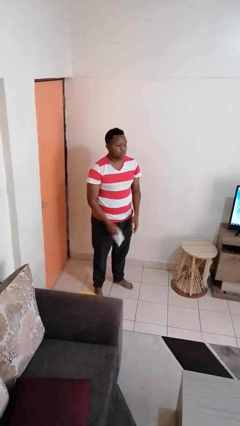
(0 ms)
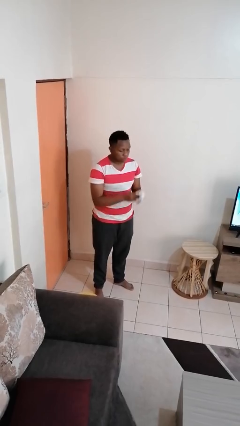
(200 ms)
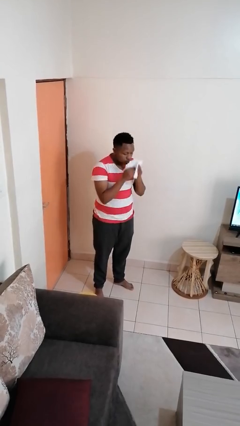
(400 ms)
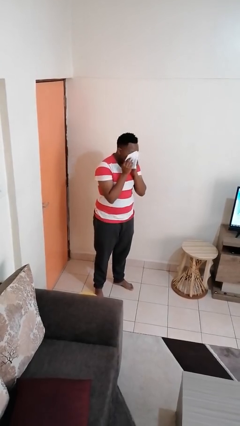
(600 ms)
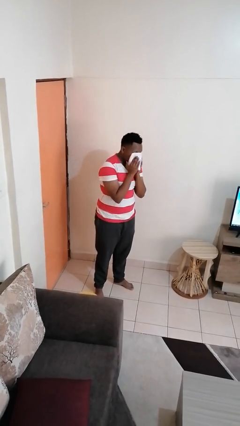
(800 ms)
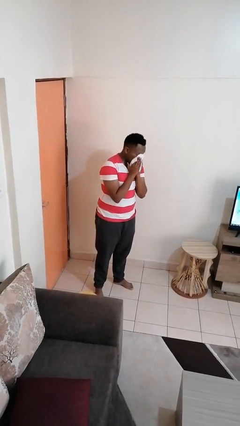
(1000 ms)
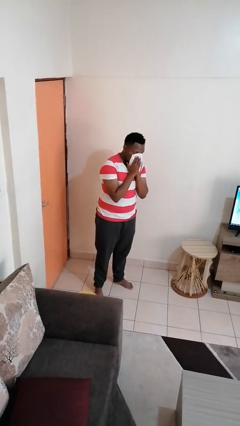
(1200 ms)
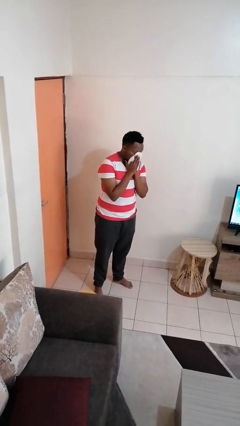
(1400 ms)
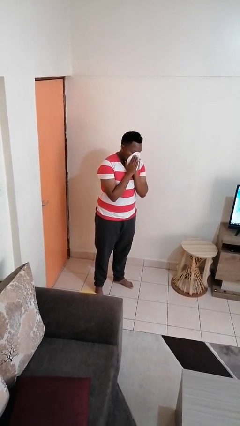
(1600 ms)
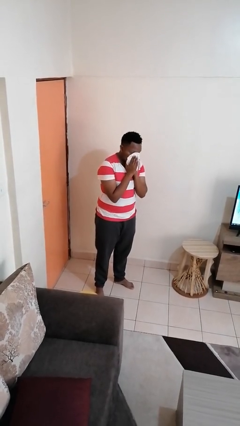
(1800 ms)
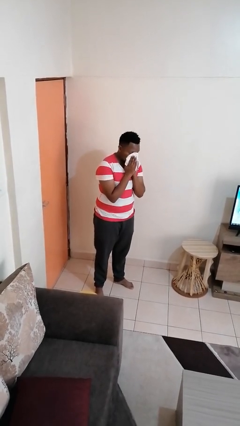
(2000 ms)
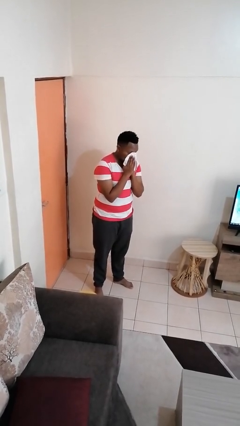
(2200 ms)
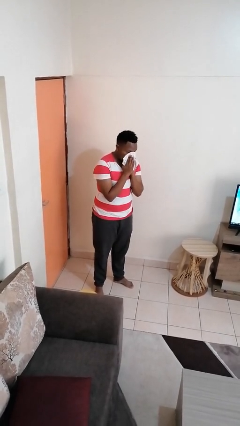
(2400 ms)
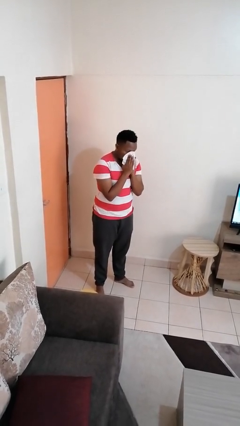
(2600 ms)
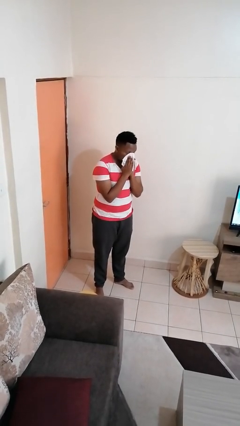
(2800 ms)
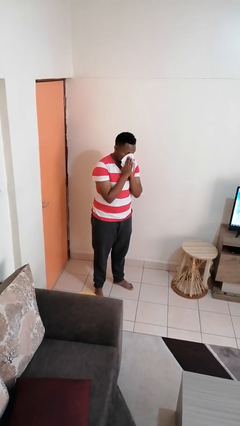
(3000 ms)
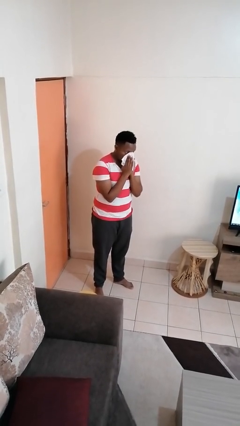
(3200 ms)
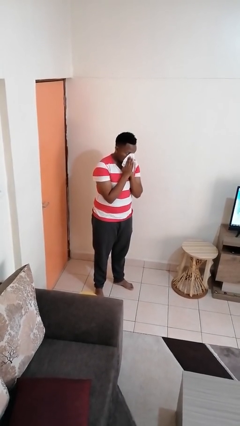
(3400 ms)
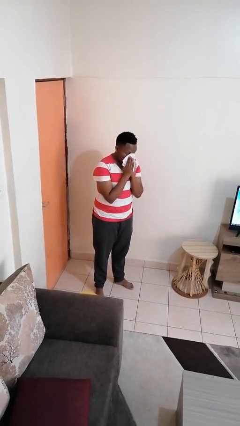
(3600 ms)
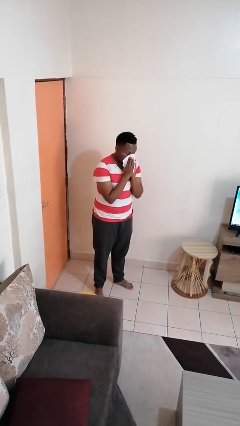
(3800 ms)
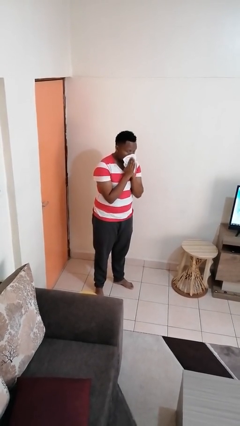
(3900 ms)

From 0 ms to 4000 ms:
person blows nose

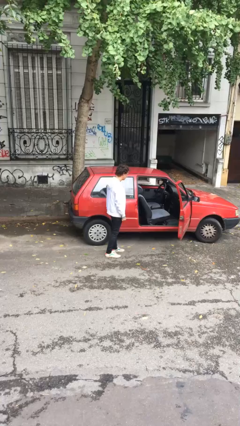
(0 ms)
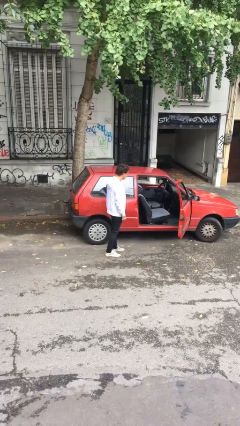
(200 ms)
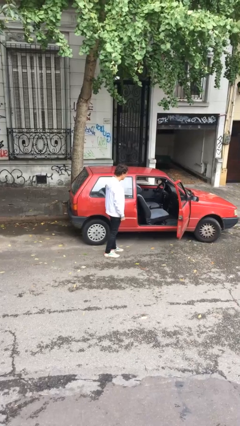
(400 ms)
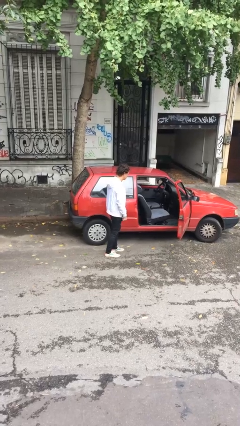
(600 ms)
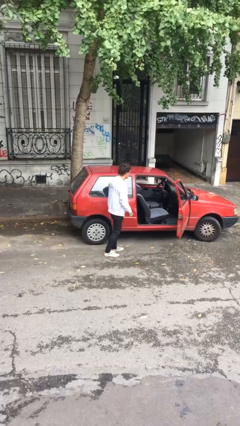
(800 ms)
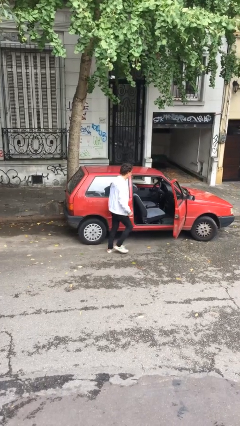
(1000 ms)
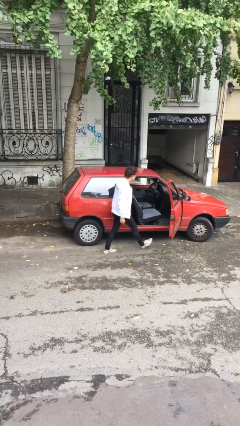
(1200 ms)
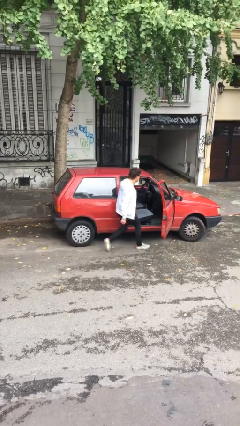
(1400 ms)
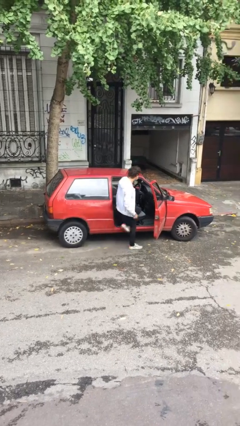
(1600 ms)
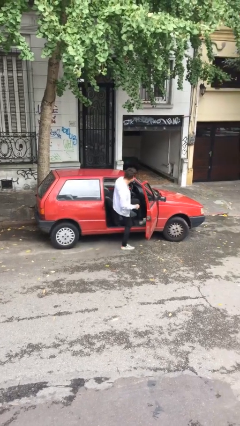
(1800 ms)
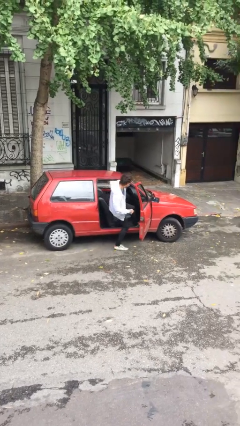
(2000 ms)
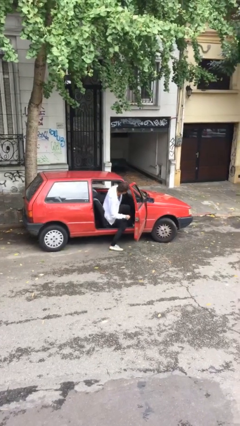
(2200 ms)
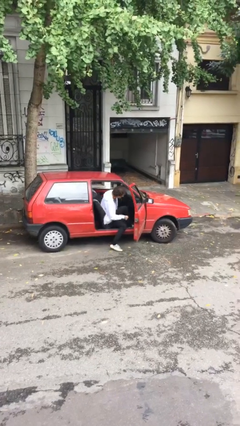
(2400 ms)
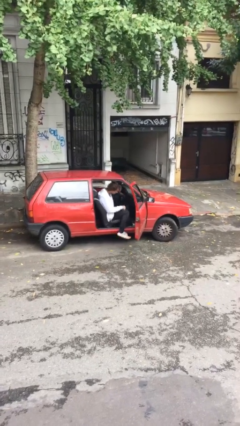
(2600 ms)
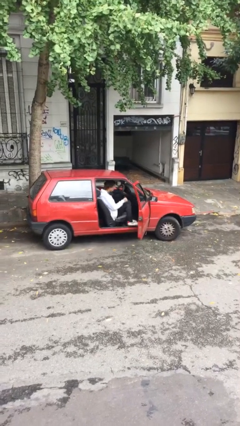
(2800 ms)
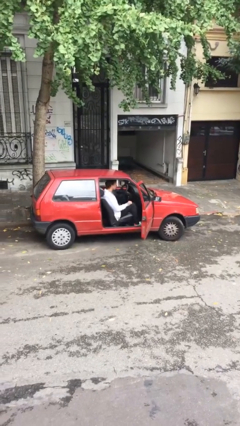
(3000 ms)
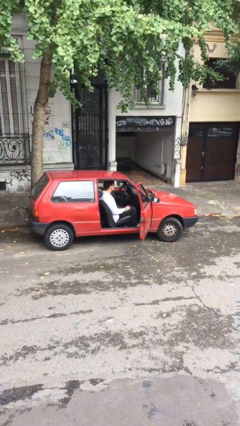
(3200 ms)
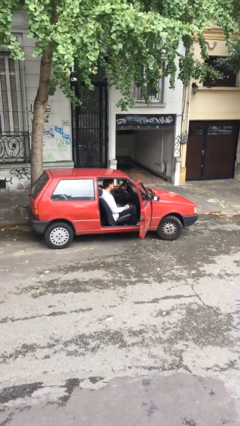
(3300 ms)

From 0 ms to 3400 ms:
person enters car

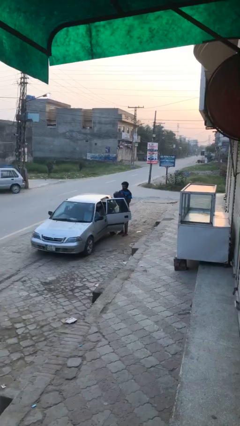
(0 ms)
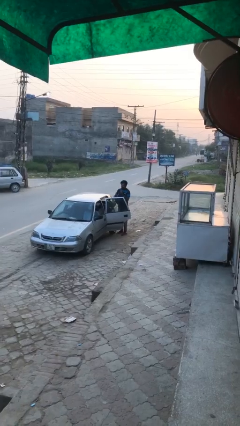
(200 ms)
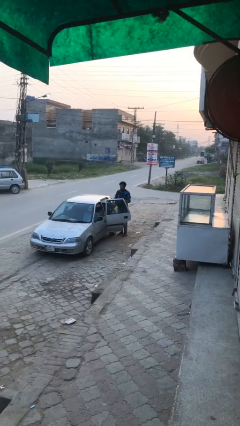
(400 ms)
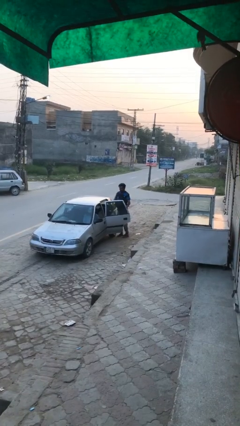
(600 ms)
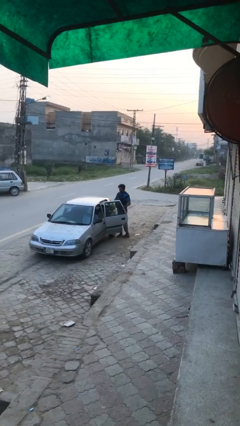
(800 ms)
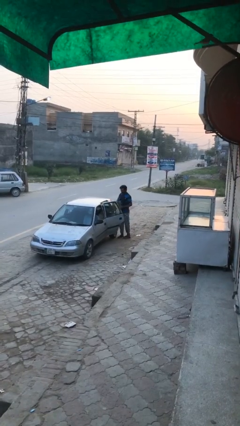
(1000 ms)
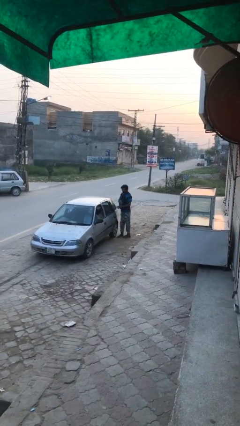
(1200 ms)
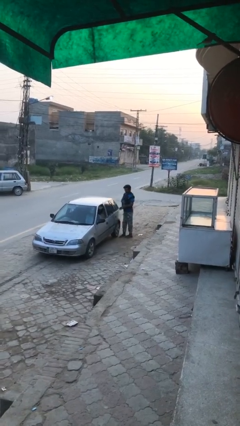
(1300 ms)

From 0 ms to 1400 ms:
person closes car door

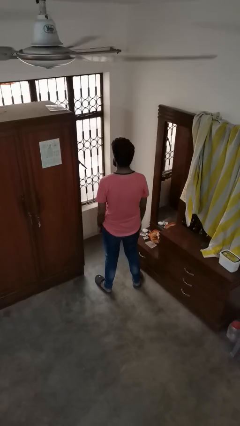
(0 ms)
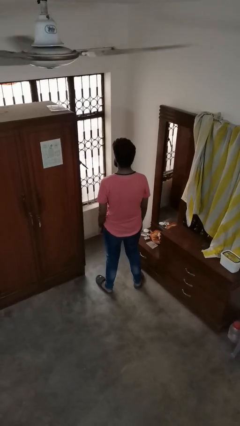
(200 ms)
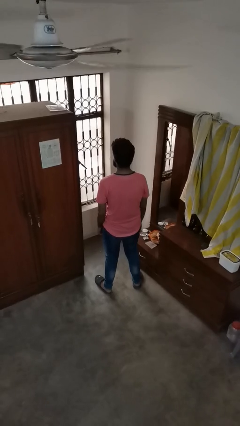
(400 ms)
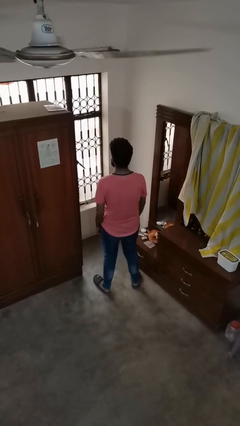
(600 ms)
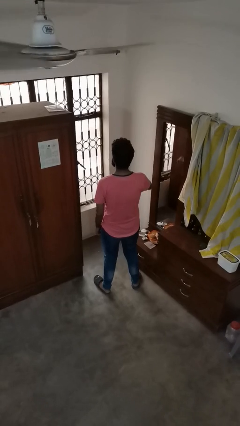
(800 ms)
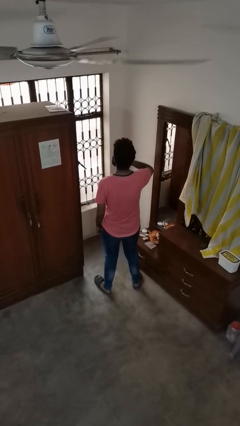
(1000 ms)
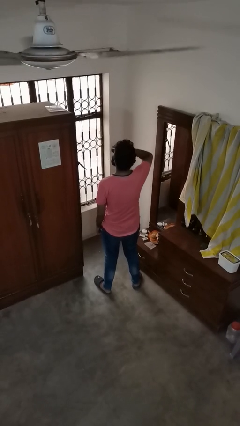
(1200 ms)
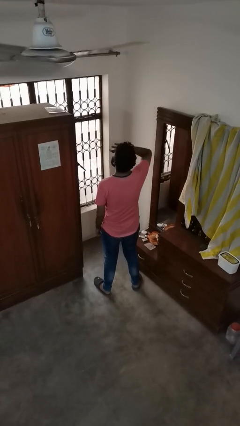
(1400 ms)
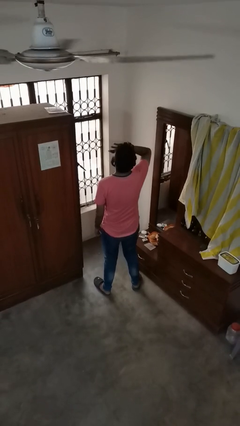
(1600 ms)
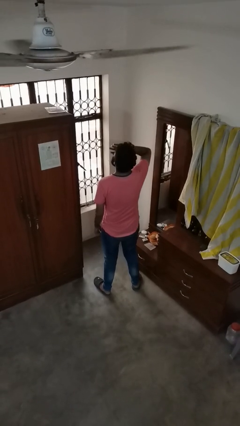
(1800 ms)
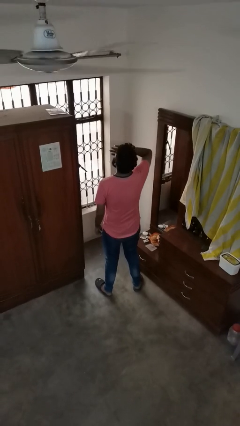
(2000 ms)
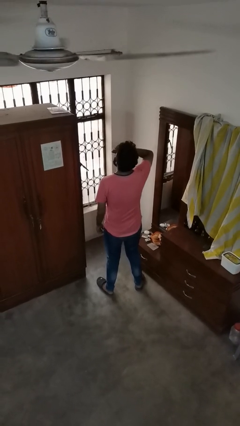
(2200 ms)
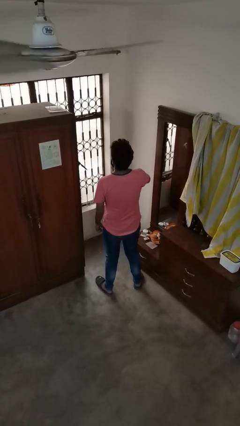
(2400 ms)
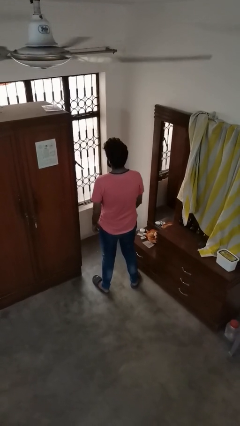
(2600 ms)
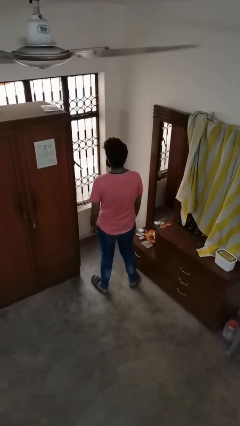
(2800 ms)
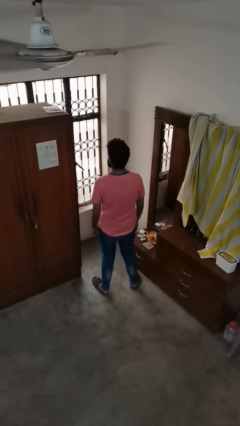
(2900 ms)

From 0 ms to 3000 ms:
person yawns

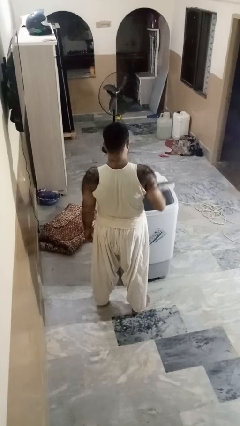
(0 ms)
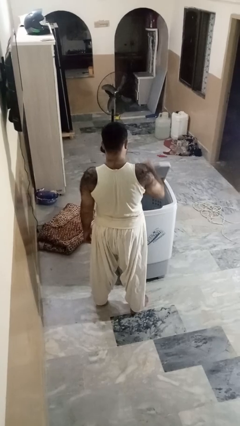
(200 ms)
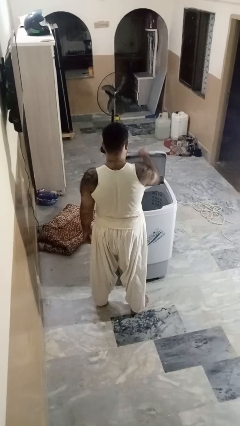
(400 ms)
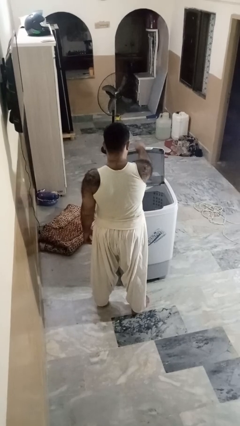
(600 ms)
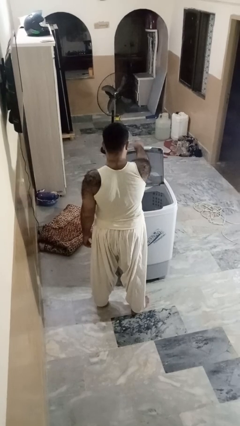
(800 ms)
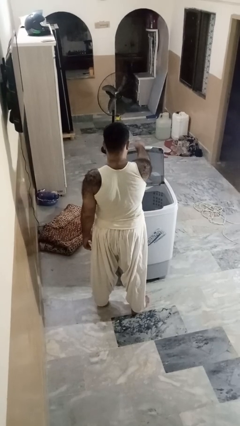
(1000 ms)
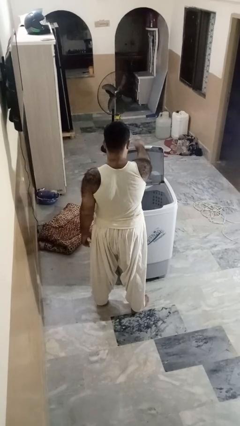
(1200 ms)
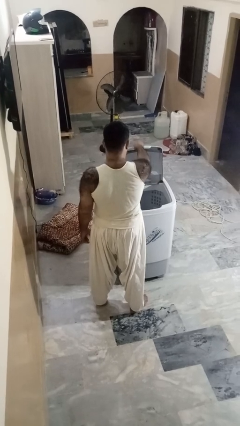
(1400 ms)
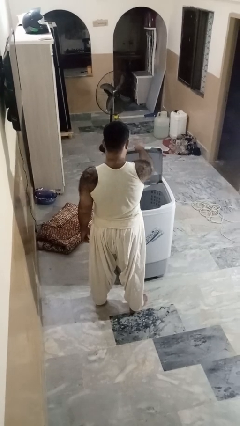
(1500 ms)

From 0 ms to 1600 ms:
person opens clothes washer

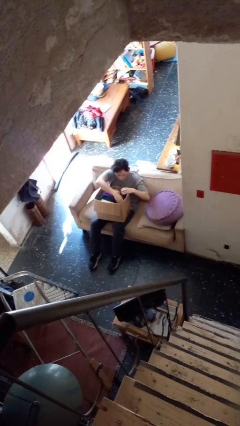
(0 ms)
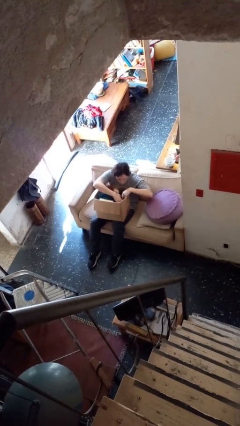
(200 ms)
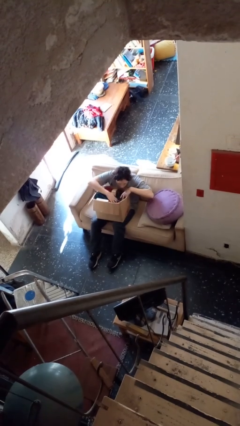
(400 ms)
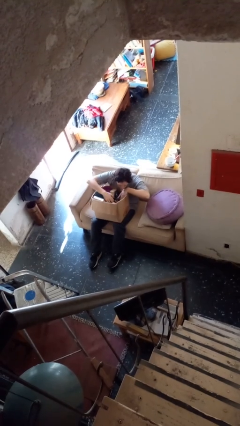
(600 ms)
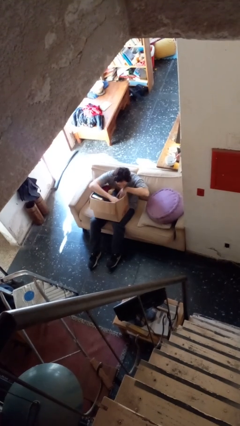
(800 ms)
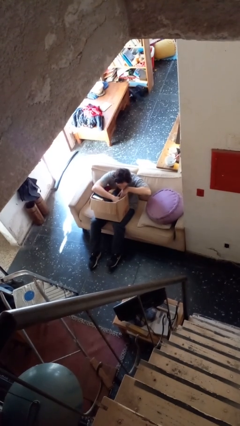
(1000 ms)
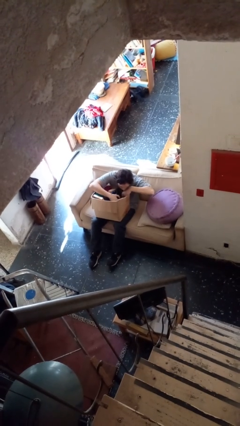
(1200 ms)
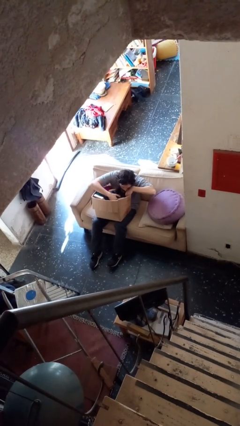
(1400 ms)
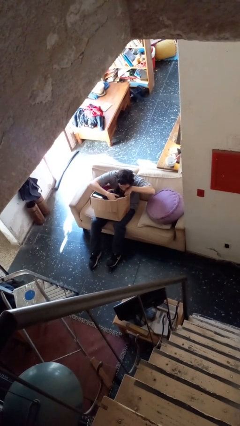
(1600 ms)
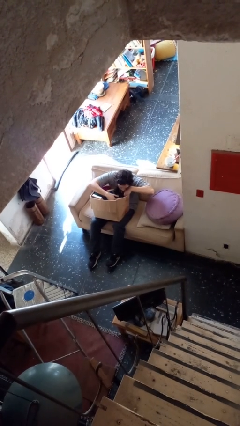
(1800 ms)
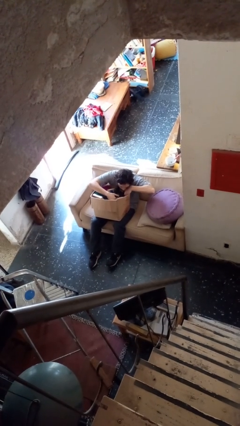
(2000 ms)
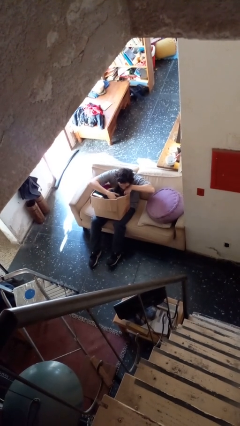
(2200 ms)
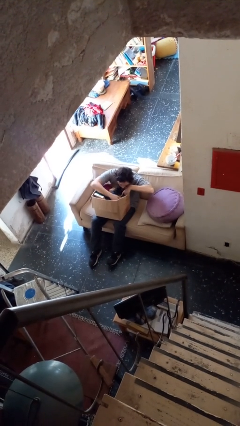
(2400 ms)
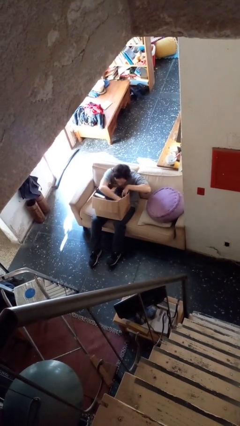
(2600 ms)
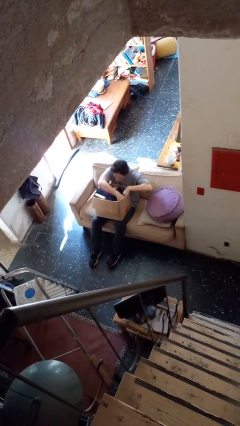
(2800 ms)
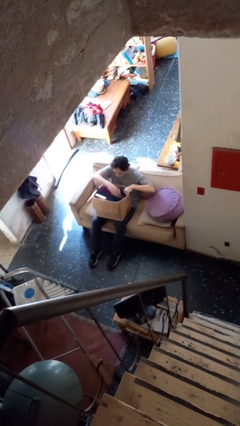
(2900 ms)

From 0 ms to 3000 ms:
person searches in box

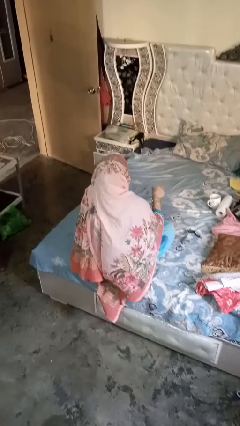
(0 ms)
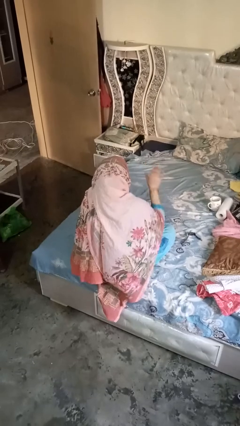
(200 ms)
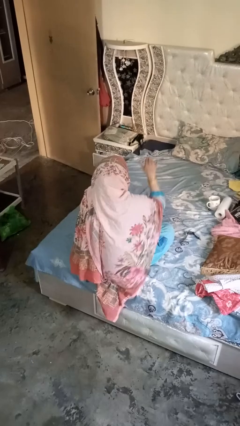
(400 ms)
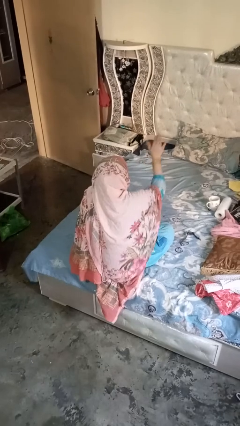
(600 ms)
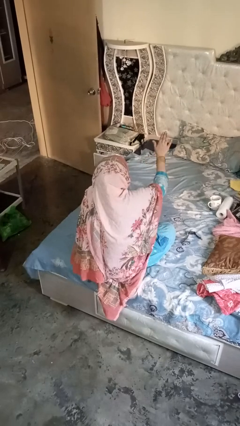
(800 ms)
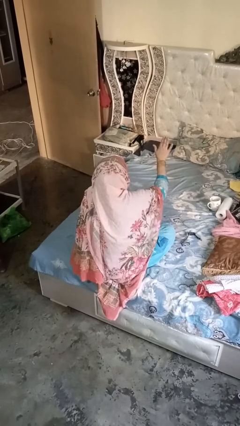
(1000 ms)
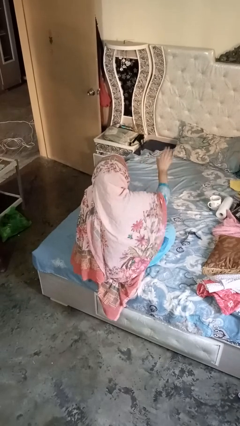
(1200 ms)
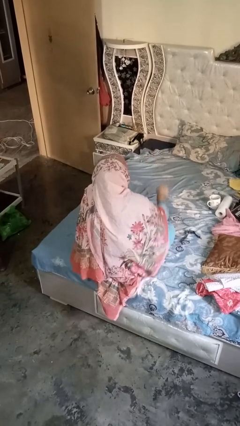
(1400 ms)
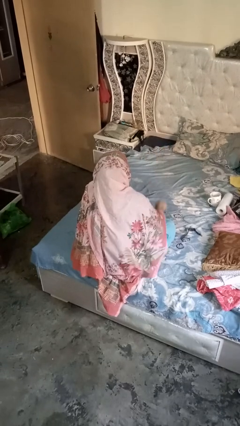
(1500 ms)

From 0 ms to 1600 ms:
person gestures stop
